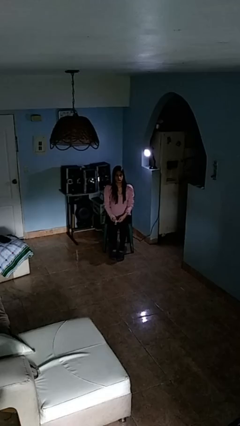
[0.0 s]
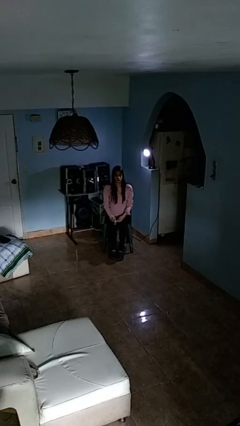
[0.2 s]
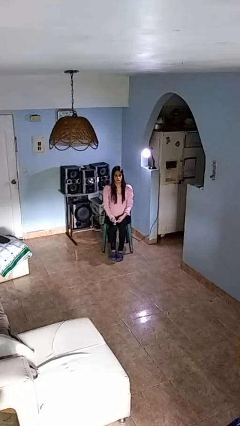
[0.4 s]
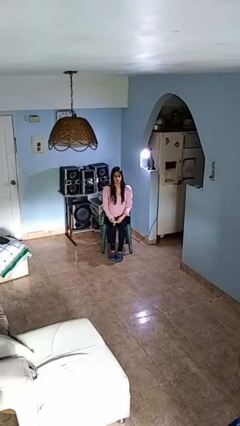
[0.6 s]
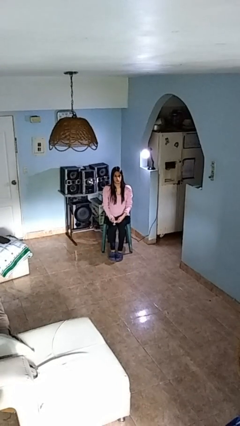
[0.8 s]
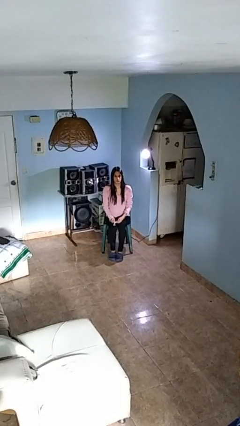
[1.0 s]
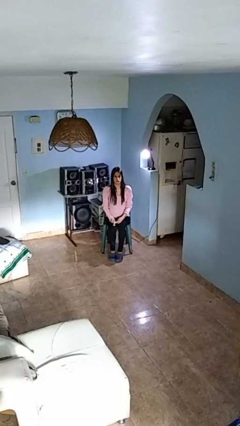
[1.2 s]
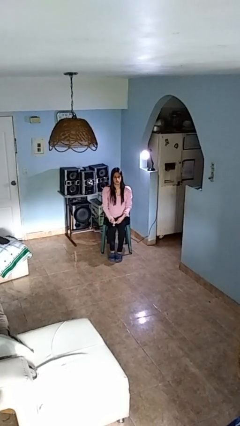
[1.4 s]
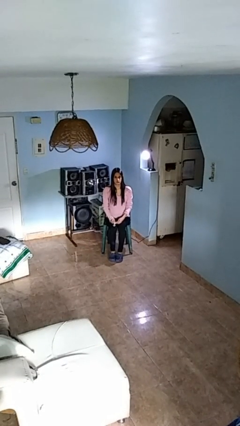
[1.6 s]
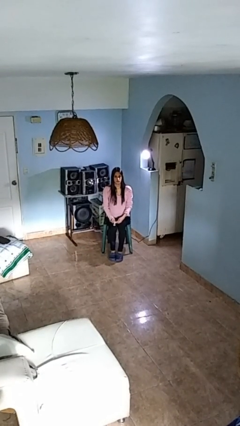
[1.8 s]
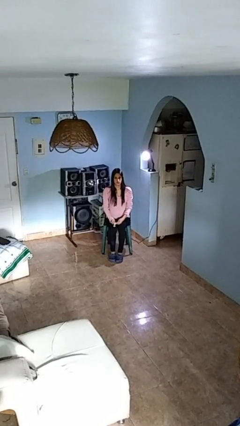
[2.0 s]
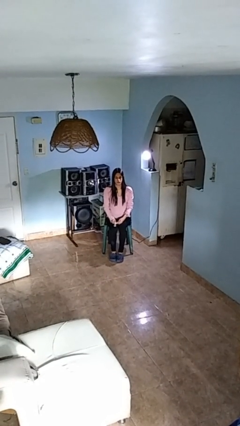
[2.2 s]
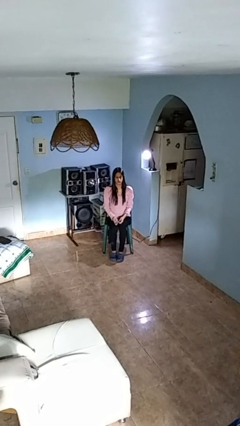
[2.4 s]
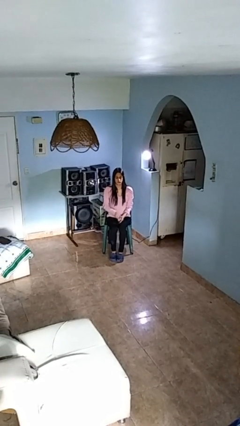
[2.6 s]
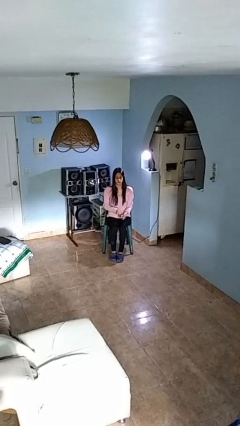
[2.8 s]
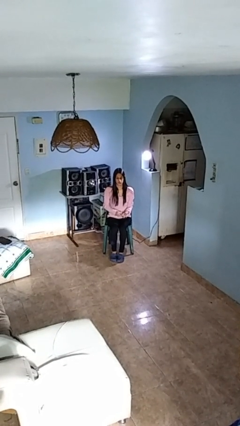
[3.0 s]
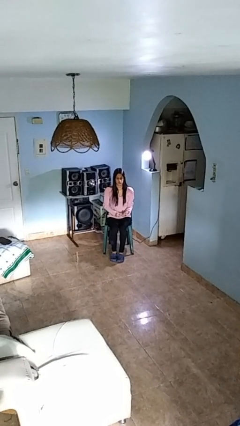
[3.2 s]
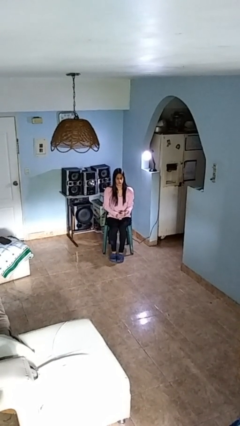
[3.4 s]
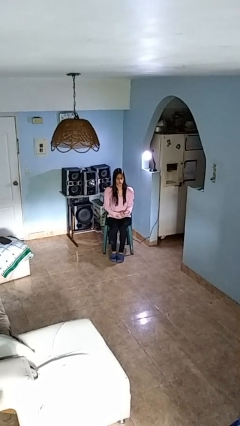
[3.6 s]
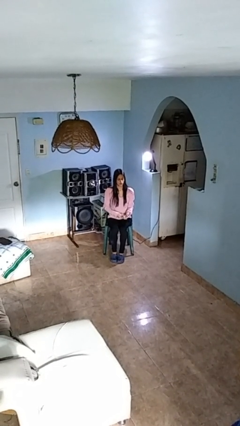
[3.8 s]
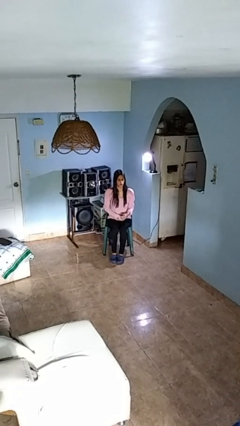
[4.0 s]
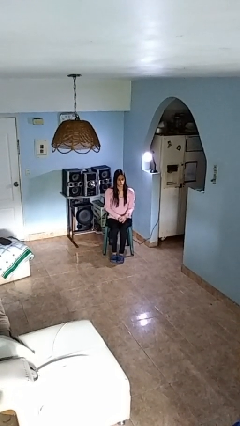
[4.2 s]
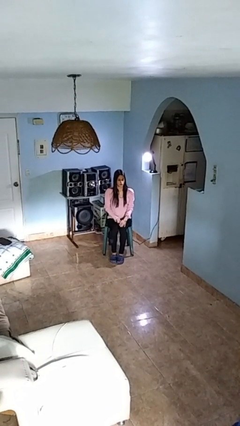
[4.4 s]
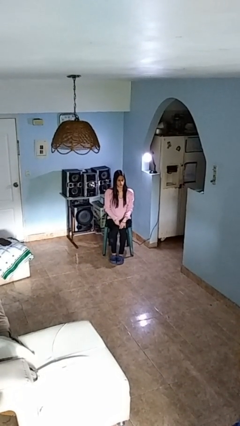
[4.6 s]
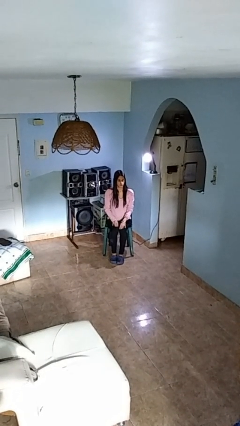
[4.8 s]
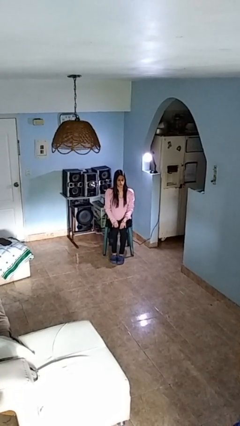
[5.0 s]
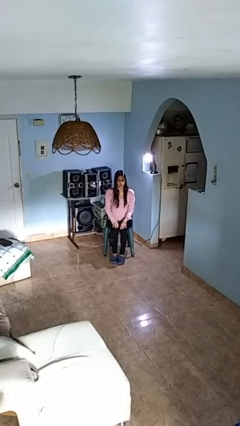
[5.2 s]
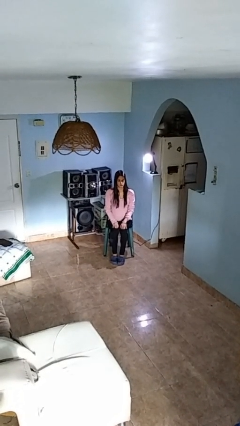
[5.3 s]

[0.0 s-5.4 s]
person puts on wristwatch

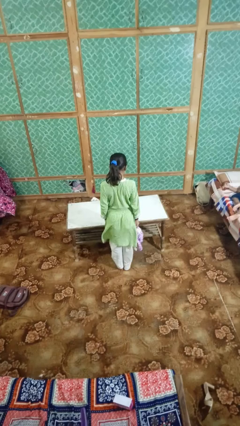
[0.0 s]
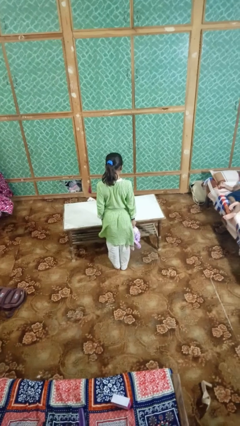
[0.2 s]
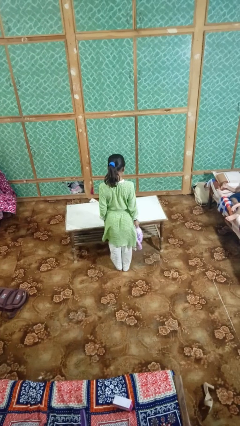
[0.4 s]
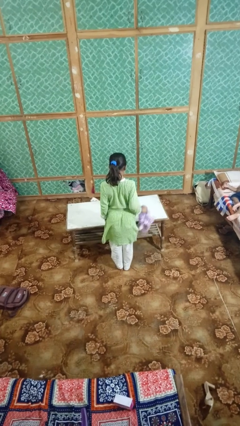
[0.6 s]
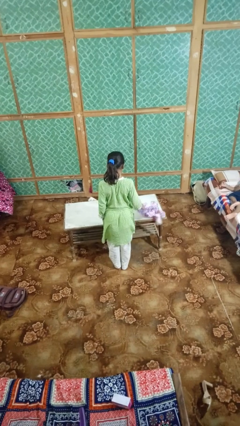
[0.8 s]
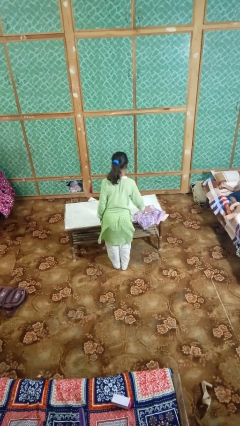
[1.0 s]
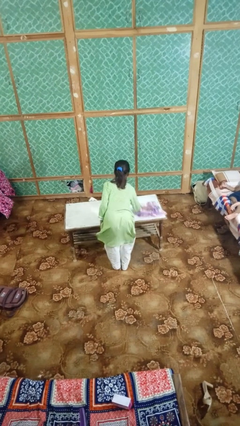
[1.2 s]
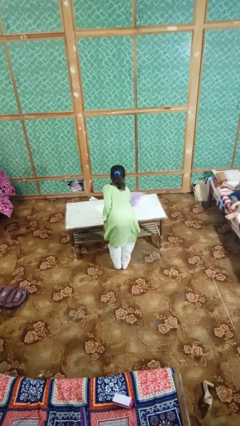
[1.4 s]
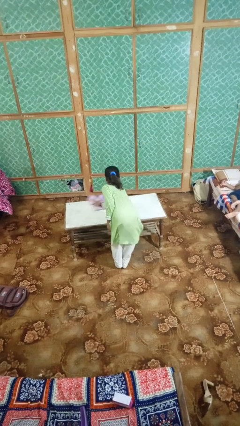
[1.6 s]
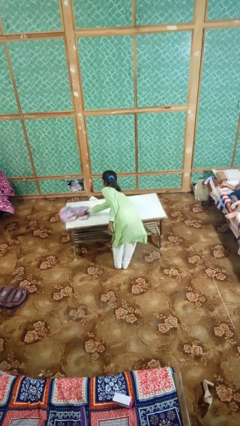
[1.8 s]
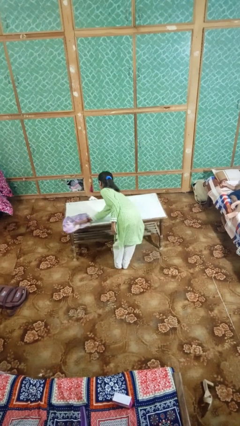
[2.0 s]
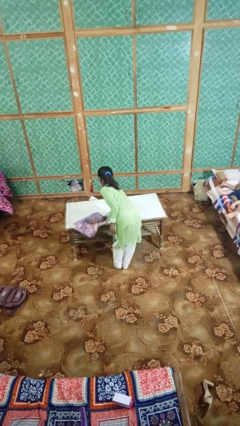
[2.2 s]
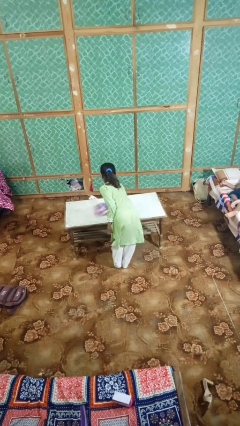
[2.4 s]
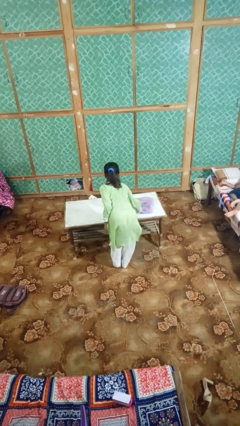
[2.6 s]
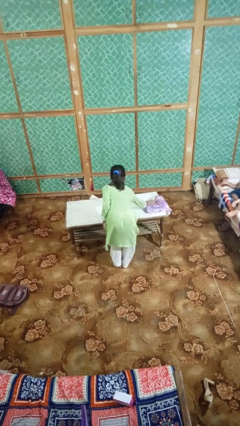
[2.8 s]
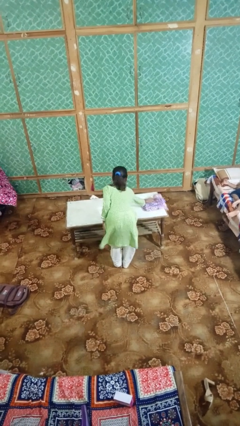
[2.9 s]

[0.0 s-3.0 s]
person cleans table with rag

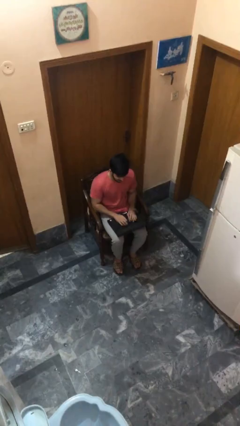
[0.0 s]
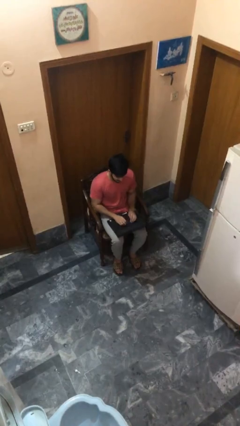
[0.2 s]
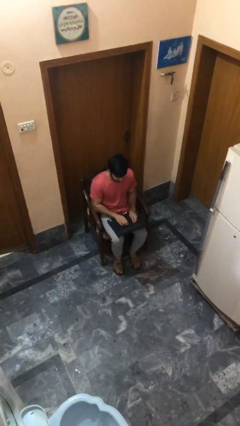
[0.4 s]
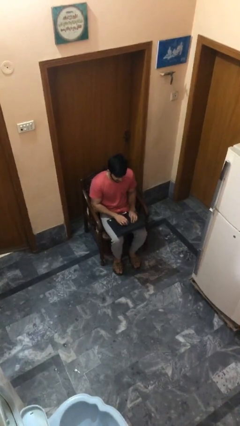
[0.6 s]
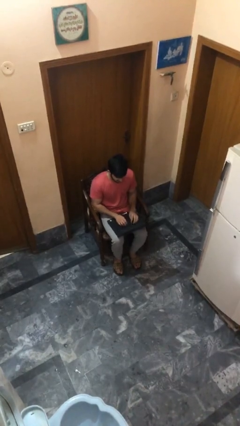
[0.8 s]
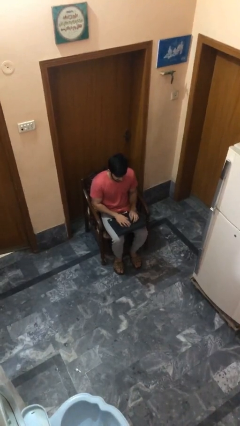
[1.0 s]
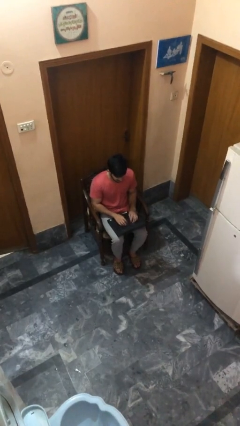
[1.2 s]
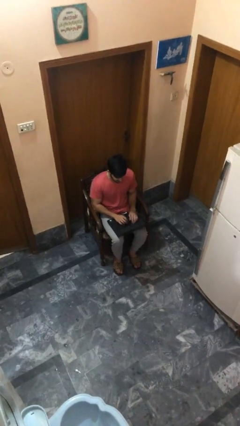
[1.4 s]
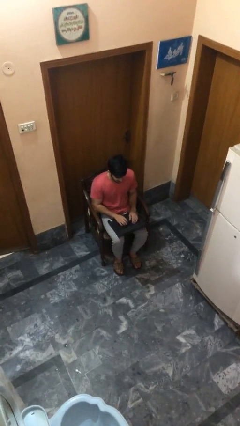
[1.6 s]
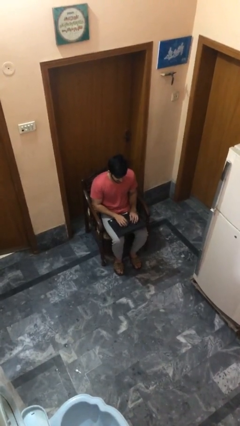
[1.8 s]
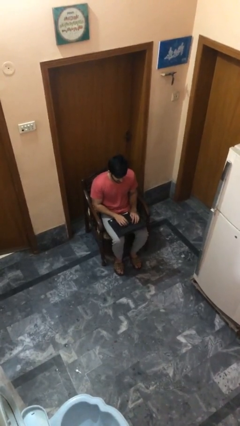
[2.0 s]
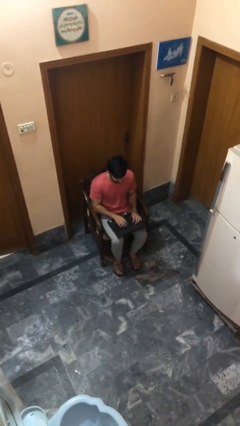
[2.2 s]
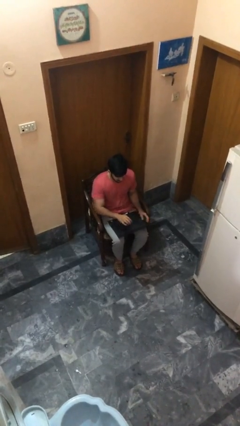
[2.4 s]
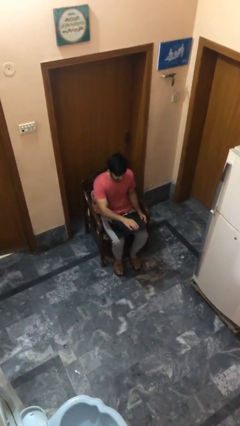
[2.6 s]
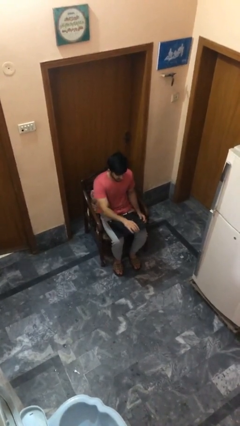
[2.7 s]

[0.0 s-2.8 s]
person interacts with laptop

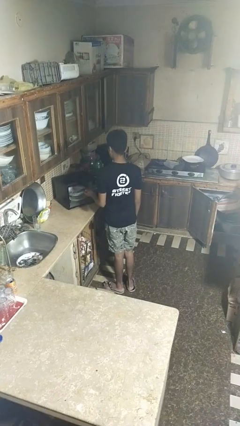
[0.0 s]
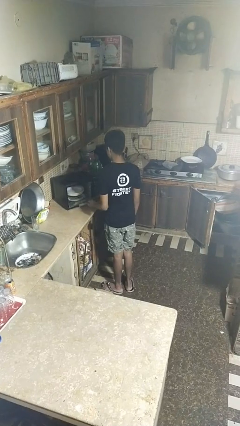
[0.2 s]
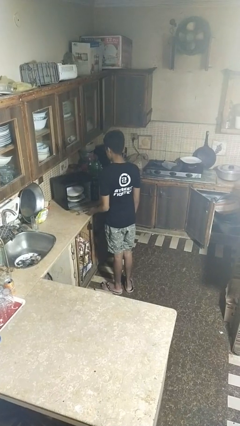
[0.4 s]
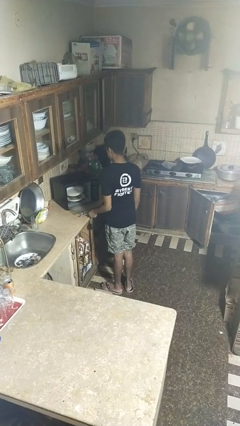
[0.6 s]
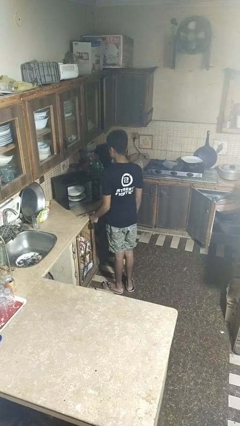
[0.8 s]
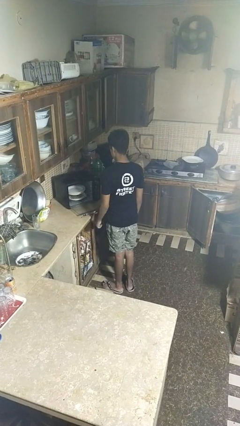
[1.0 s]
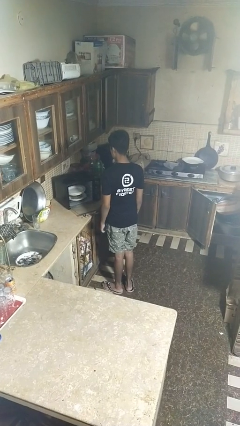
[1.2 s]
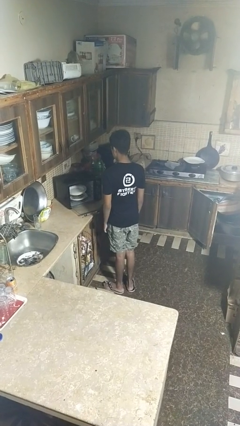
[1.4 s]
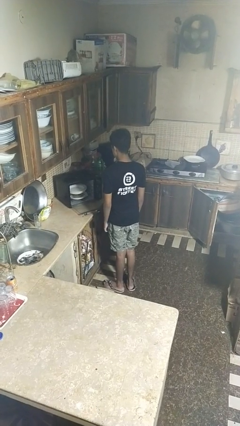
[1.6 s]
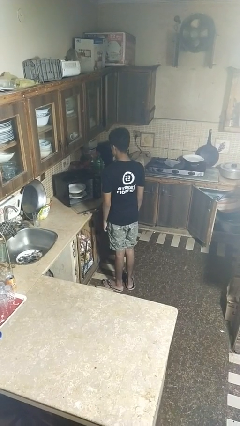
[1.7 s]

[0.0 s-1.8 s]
person opens dishwasher

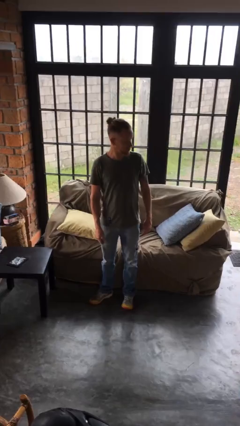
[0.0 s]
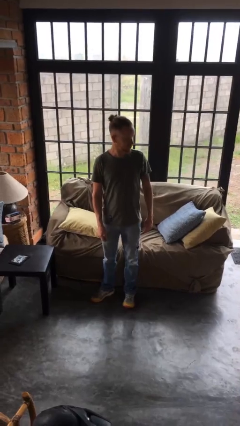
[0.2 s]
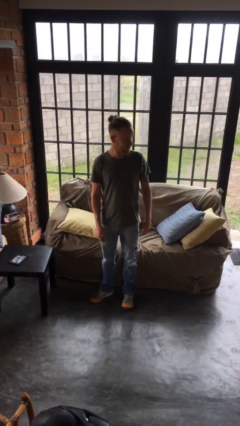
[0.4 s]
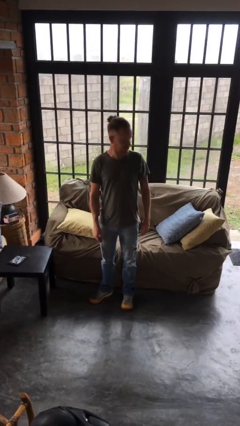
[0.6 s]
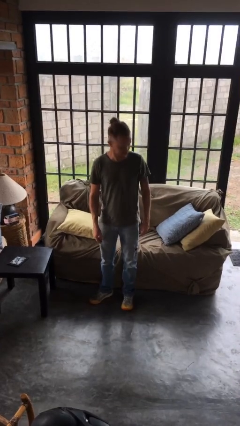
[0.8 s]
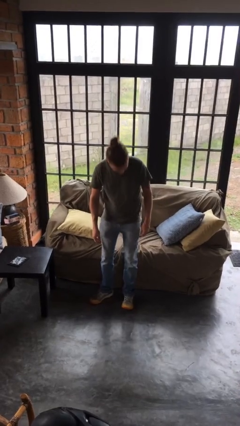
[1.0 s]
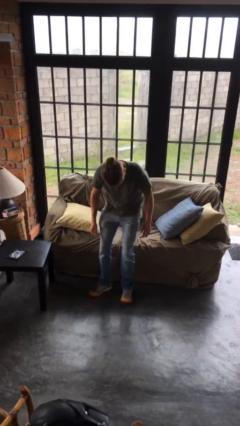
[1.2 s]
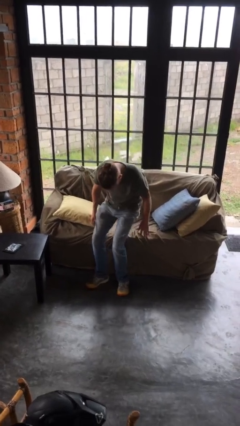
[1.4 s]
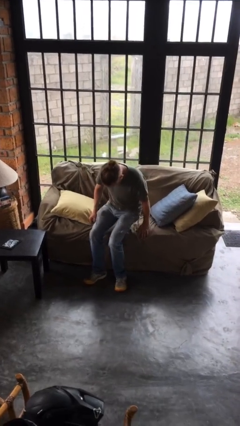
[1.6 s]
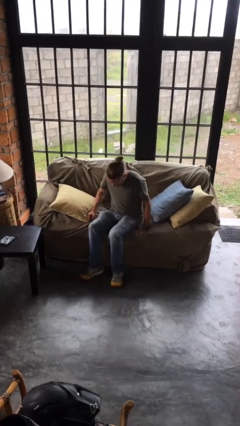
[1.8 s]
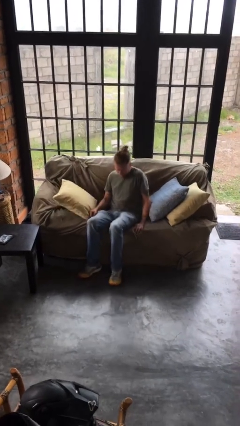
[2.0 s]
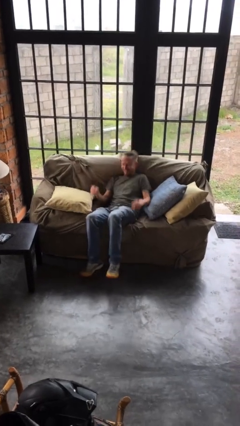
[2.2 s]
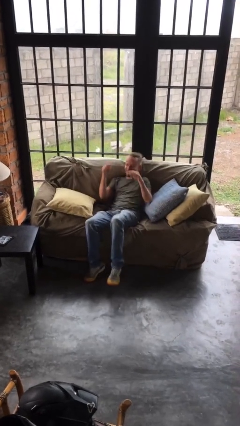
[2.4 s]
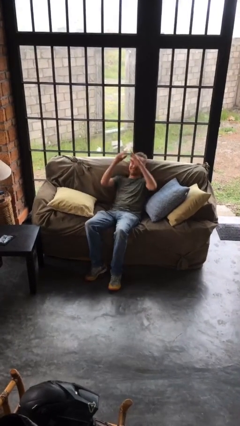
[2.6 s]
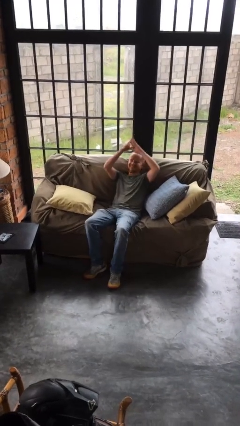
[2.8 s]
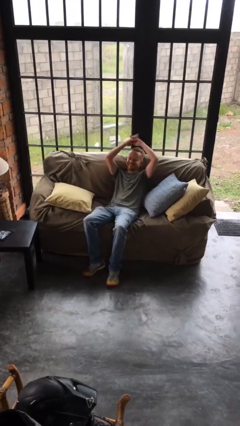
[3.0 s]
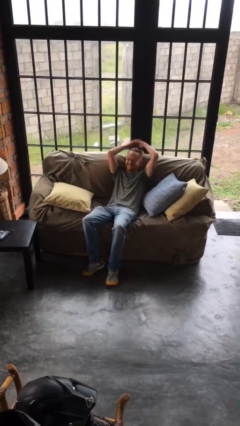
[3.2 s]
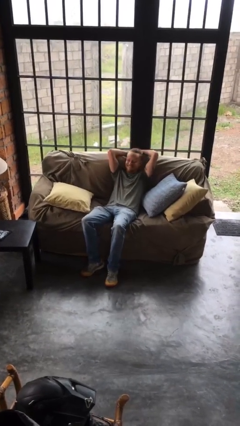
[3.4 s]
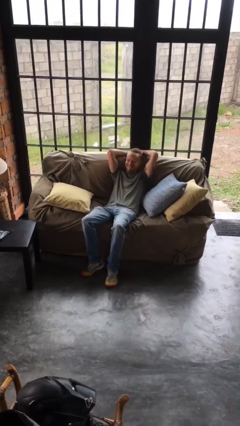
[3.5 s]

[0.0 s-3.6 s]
person lies down on couch

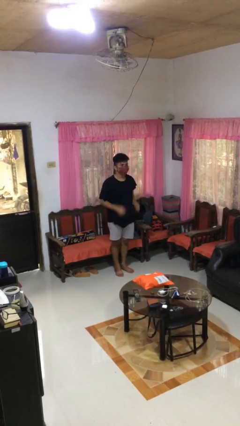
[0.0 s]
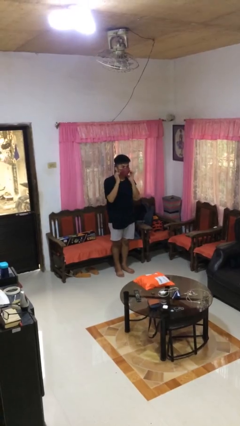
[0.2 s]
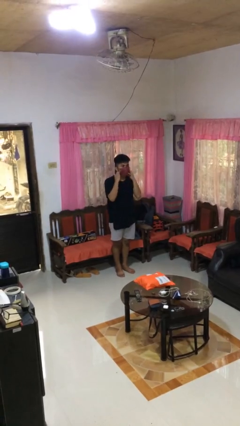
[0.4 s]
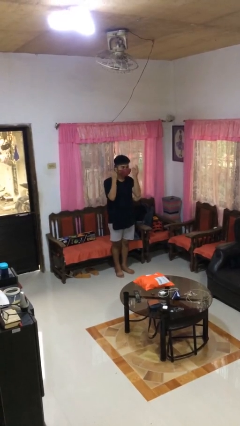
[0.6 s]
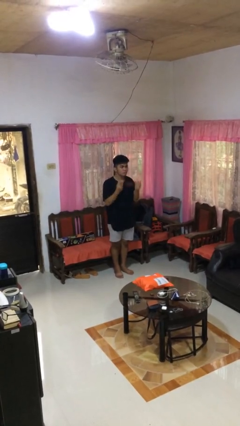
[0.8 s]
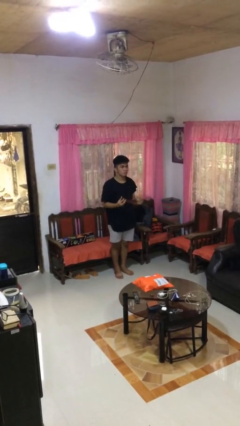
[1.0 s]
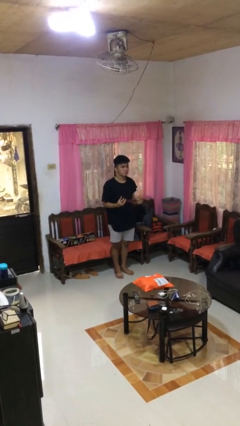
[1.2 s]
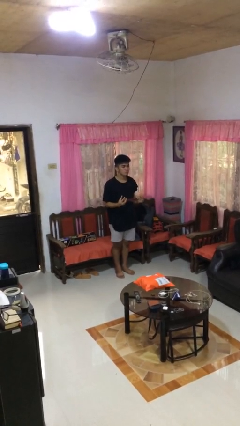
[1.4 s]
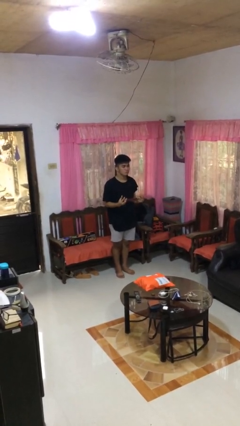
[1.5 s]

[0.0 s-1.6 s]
person takes off facemask
